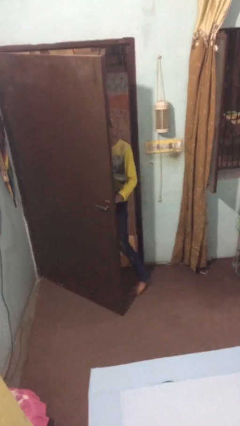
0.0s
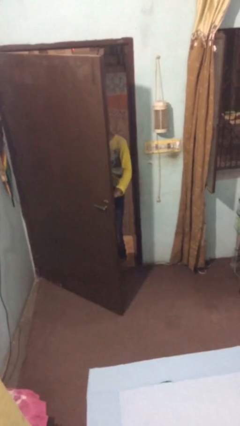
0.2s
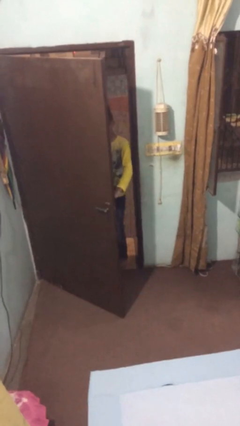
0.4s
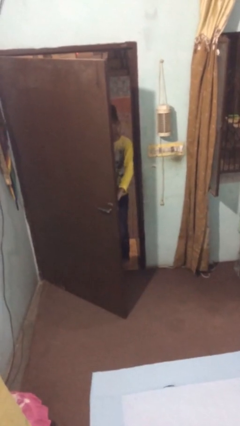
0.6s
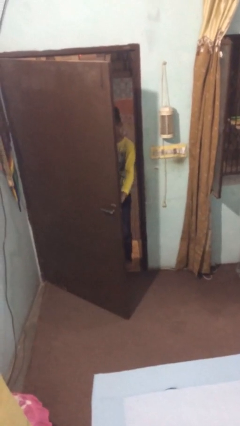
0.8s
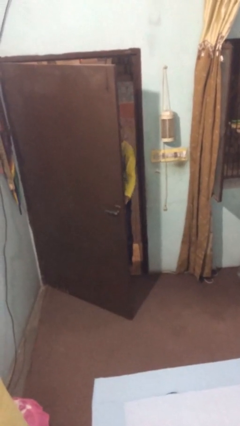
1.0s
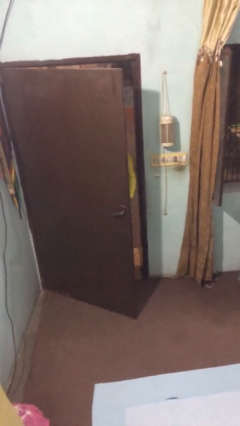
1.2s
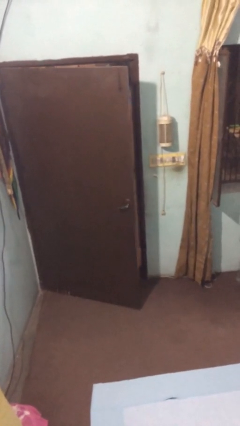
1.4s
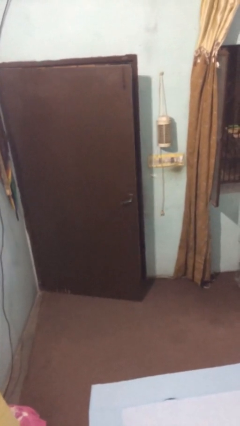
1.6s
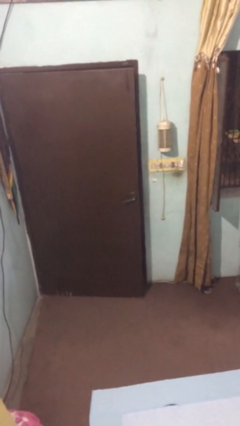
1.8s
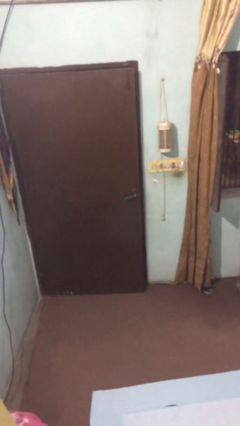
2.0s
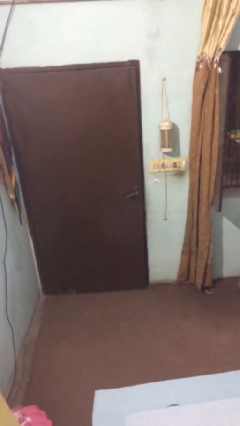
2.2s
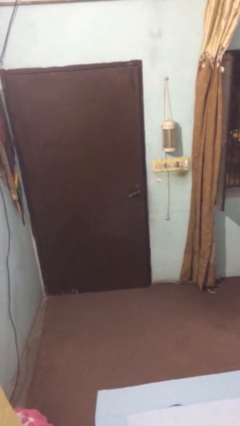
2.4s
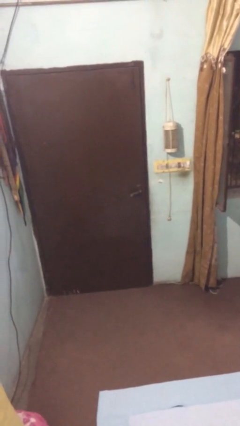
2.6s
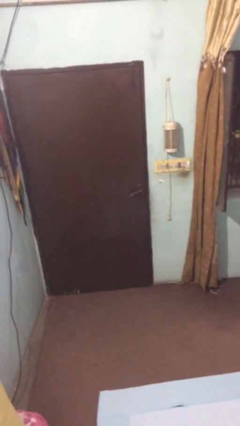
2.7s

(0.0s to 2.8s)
person closes facility door

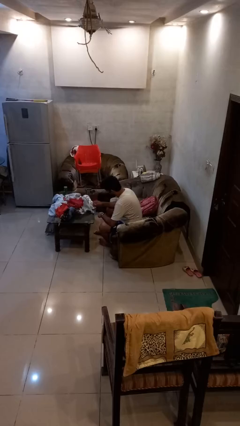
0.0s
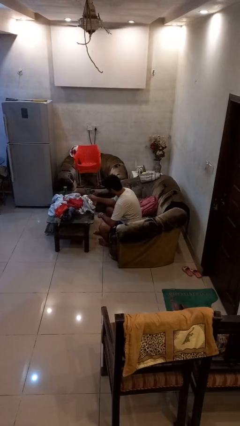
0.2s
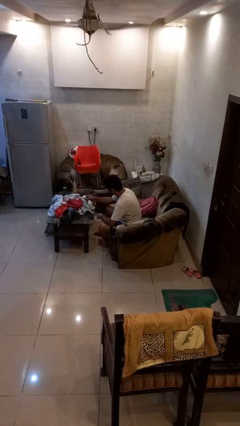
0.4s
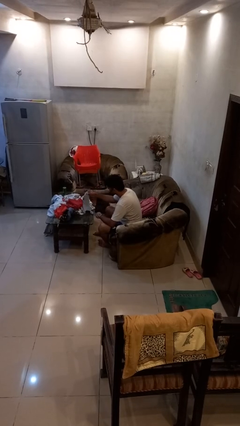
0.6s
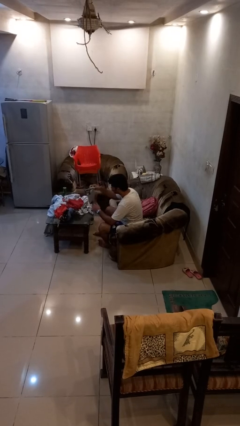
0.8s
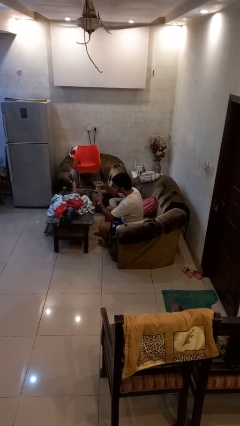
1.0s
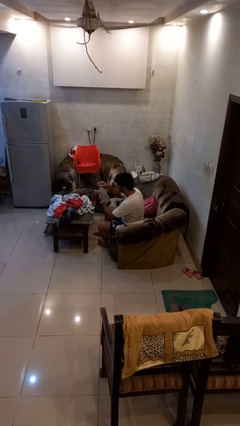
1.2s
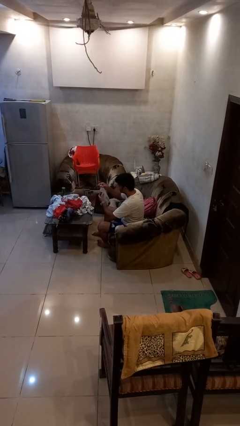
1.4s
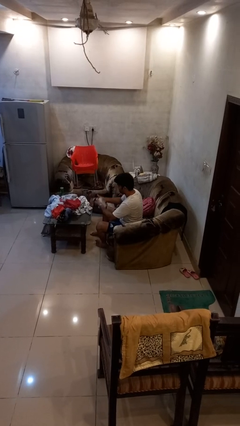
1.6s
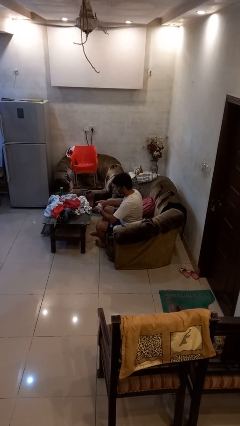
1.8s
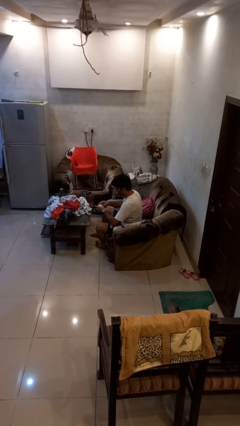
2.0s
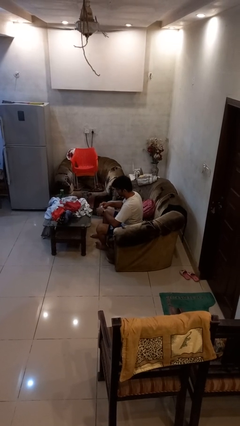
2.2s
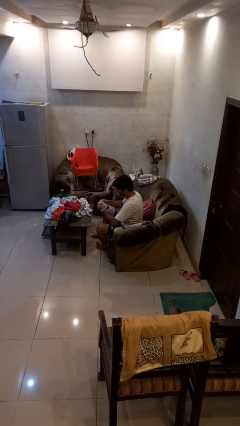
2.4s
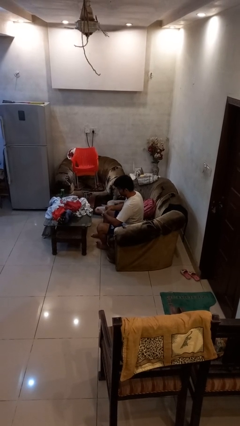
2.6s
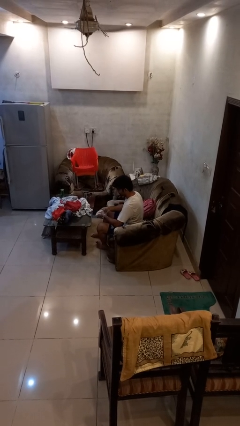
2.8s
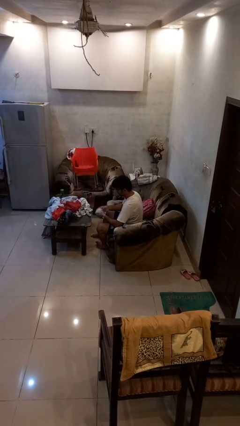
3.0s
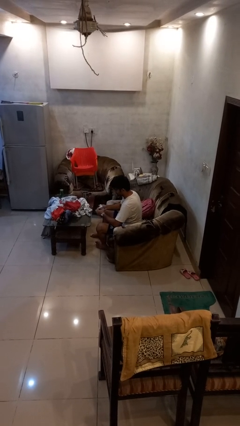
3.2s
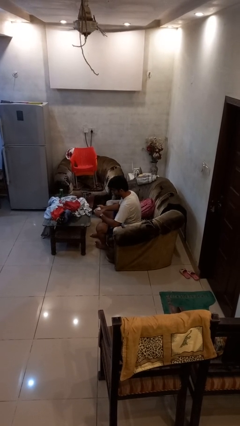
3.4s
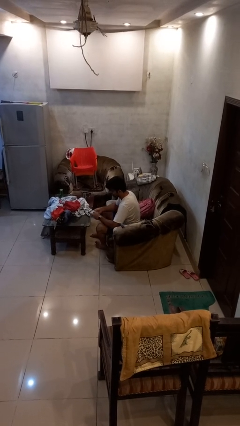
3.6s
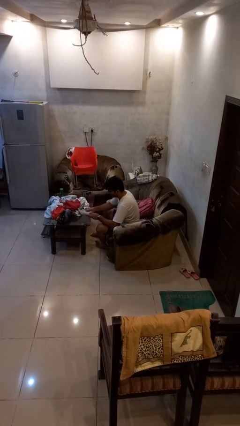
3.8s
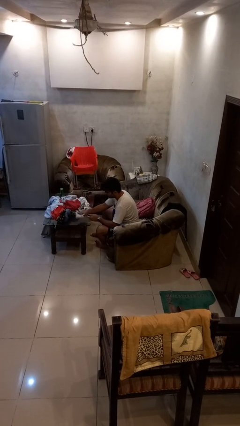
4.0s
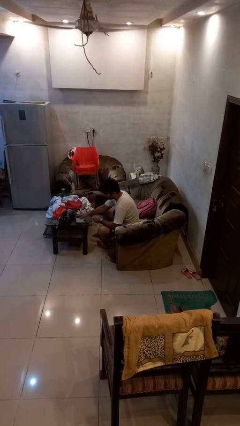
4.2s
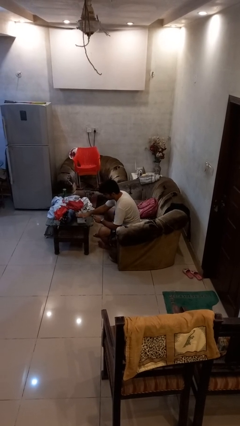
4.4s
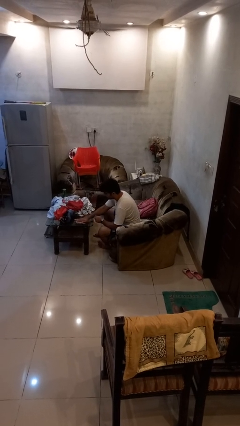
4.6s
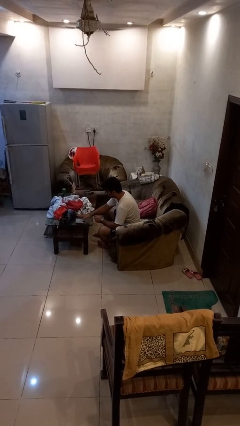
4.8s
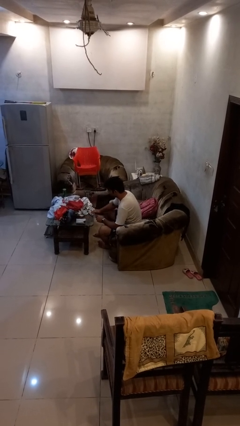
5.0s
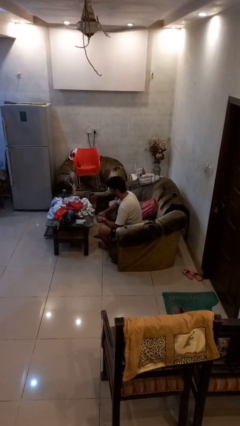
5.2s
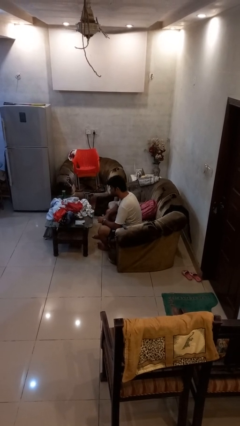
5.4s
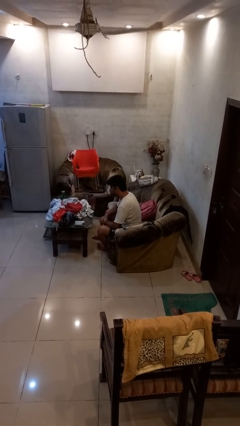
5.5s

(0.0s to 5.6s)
person folds socks

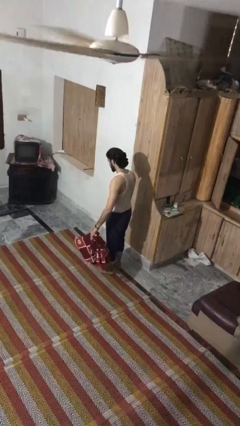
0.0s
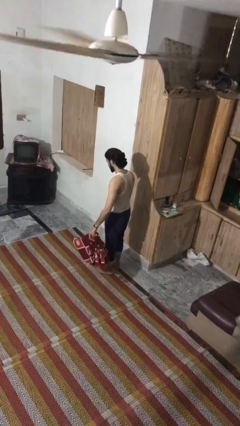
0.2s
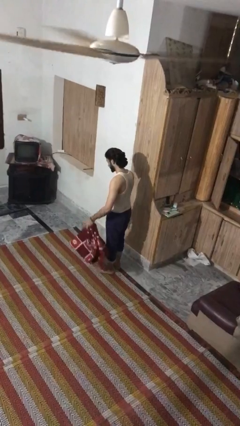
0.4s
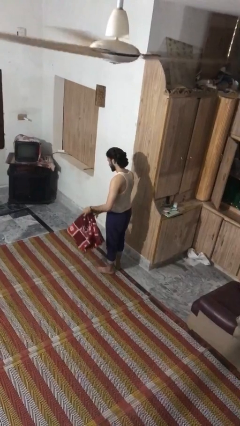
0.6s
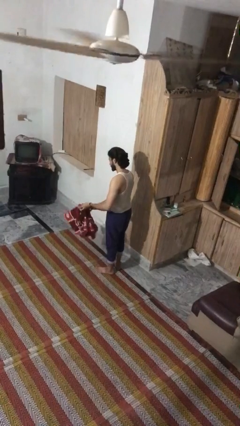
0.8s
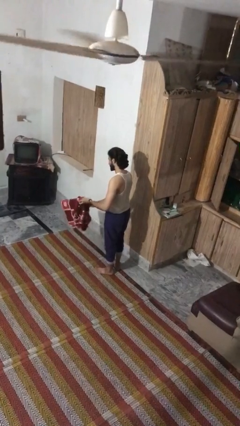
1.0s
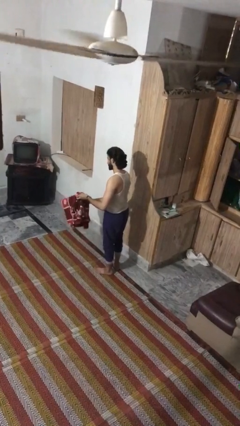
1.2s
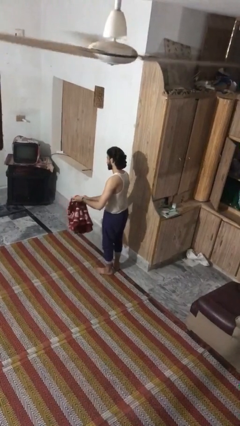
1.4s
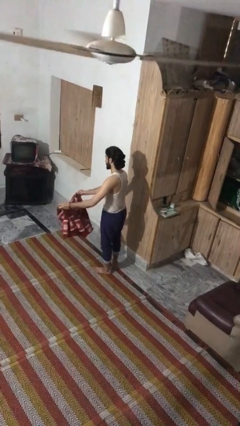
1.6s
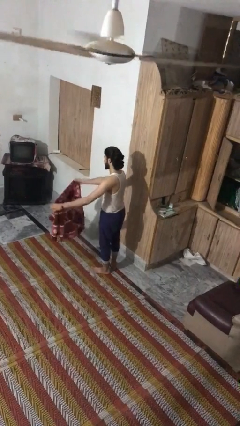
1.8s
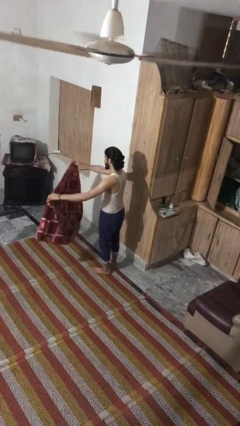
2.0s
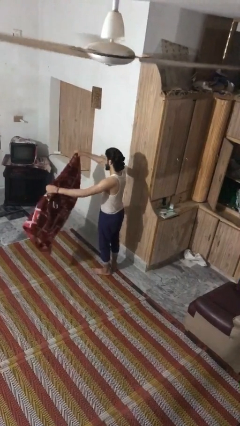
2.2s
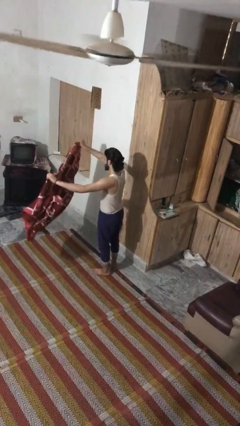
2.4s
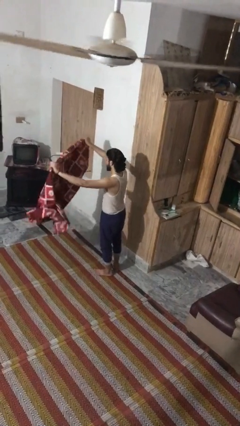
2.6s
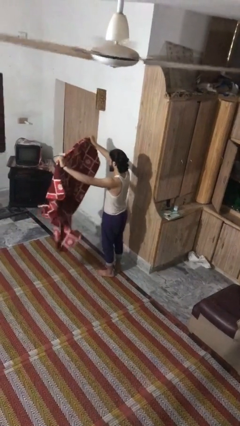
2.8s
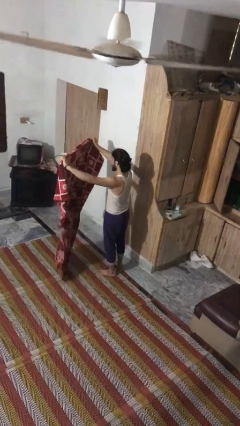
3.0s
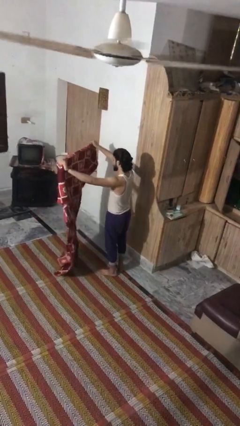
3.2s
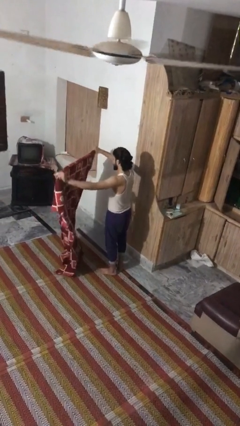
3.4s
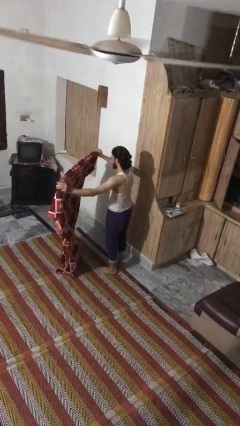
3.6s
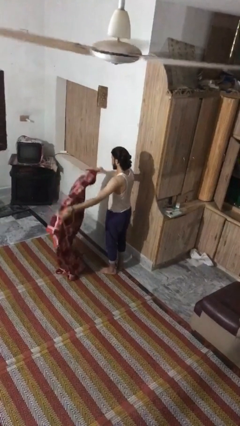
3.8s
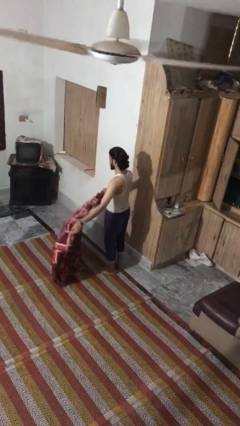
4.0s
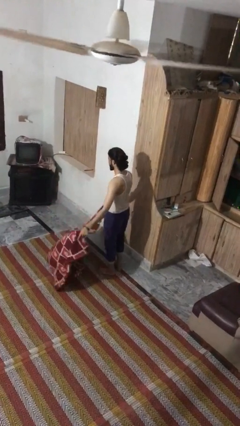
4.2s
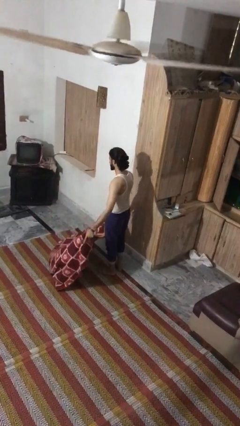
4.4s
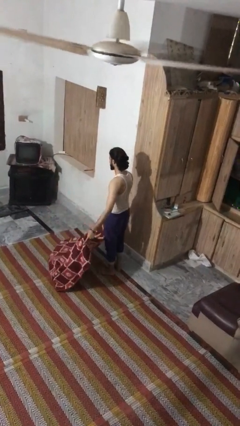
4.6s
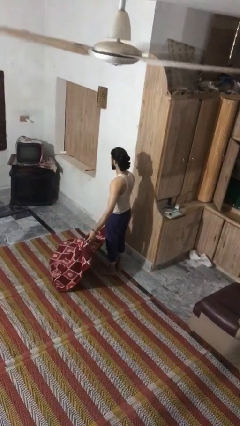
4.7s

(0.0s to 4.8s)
person unfolds blanket

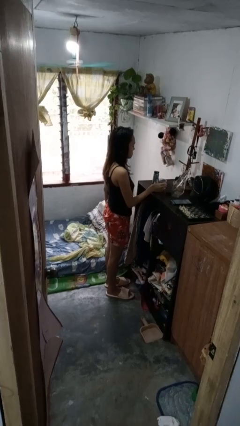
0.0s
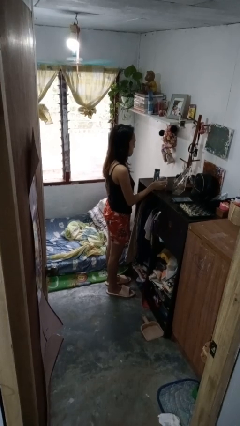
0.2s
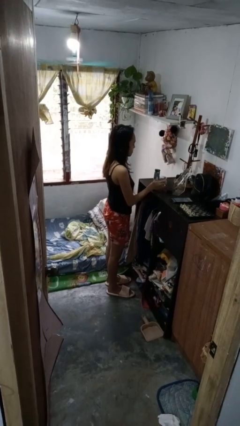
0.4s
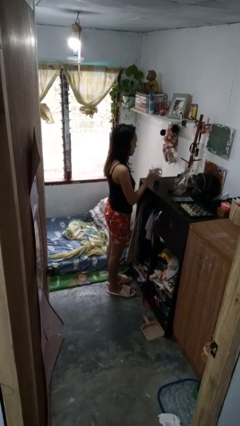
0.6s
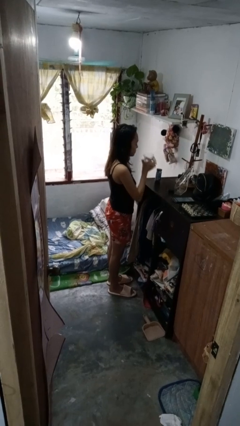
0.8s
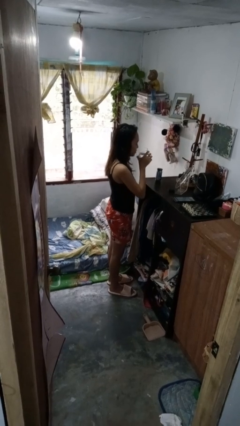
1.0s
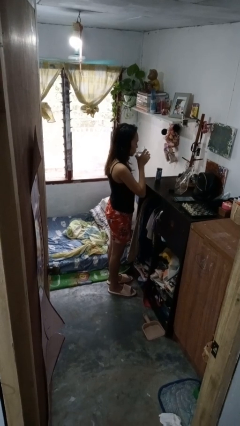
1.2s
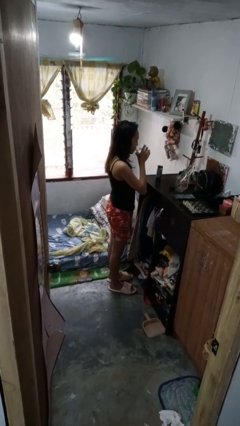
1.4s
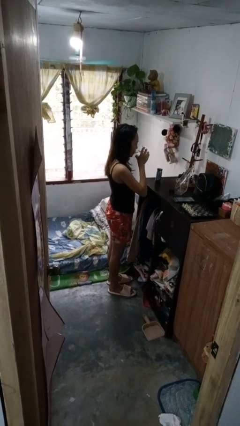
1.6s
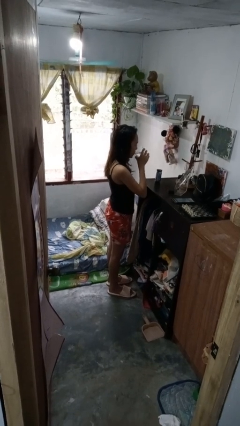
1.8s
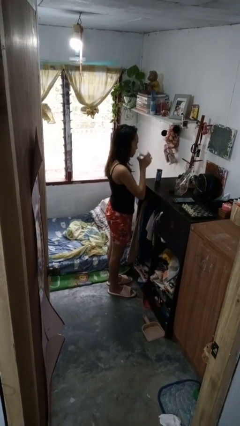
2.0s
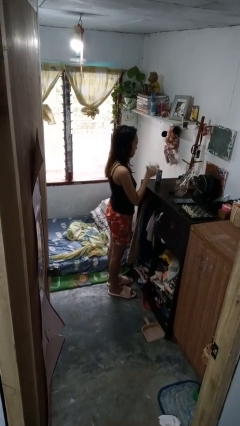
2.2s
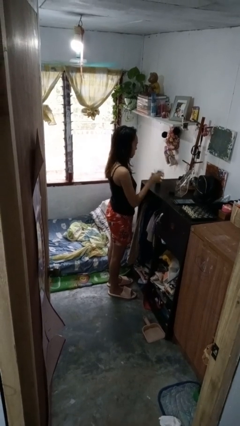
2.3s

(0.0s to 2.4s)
person drinks from cup

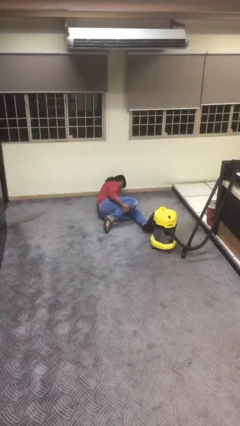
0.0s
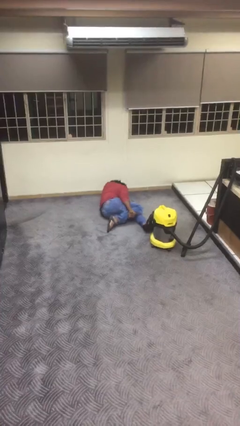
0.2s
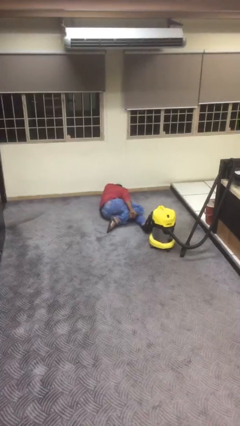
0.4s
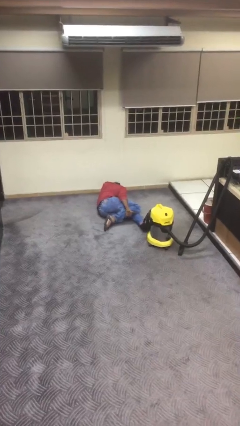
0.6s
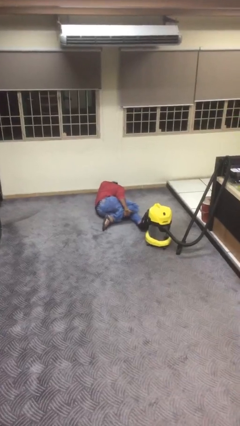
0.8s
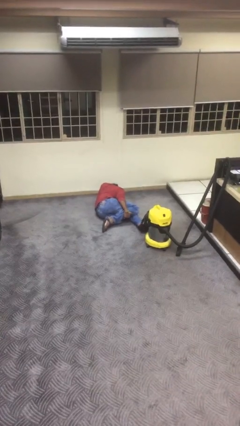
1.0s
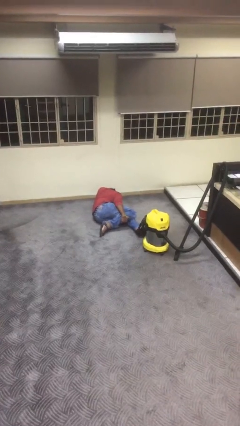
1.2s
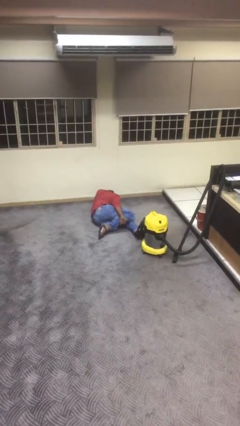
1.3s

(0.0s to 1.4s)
person lies down on floor

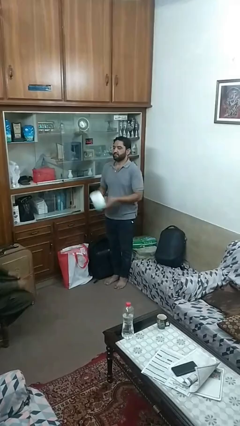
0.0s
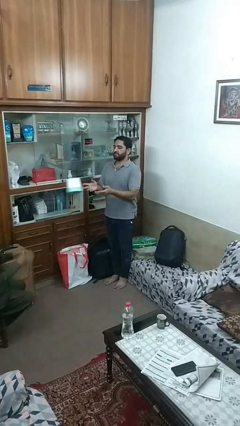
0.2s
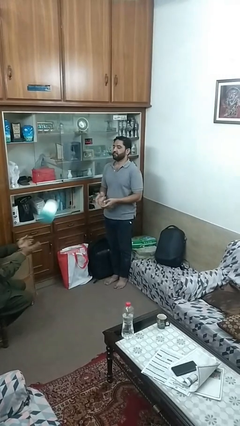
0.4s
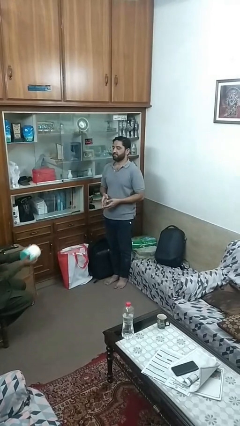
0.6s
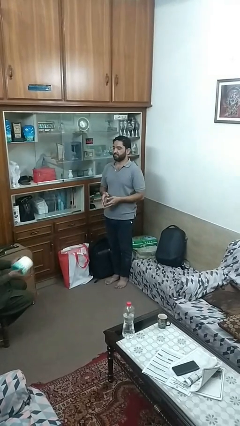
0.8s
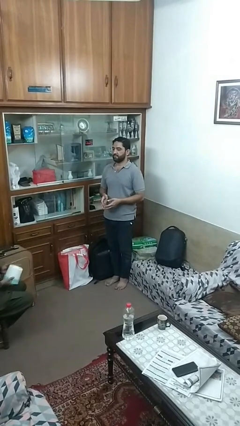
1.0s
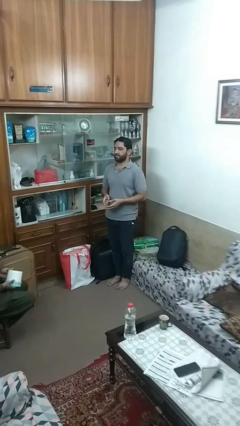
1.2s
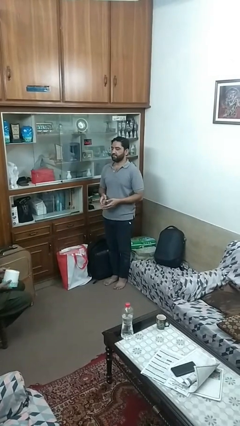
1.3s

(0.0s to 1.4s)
person throws object to person
